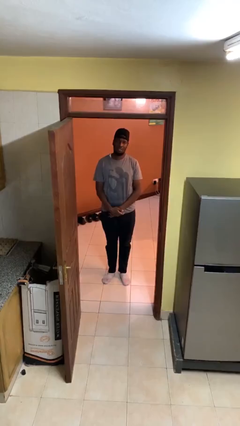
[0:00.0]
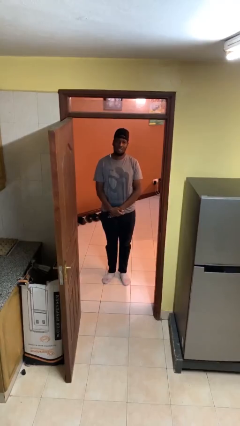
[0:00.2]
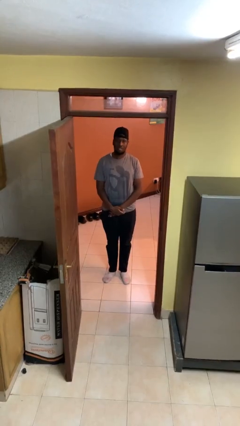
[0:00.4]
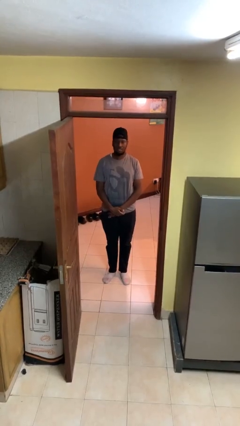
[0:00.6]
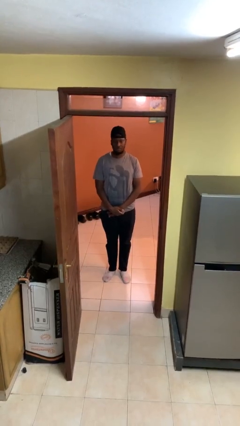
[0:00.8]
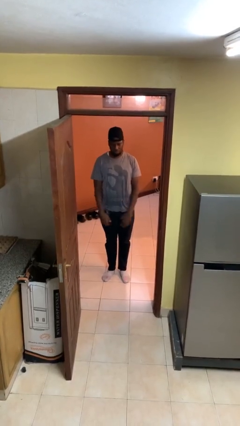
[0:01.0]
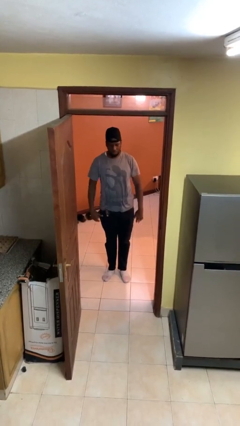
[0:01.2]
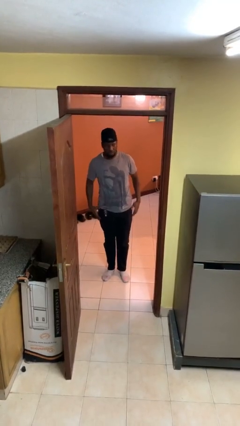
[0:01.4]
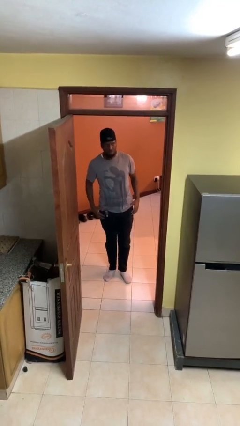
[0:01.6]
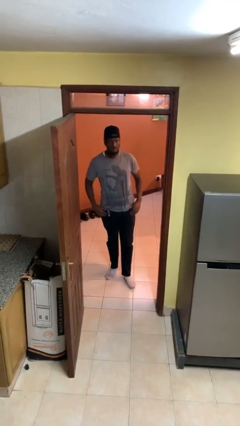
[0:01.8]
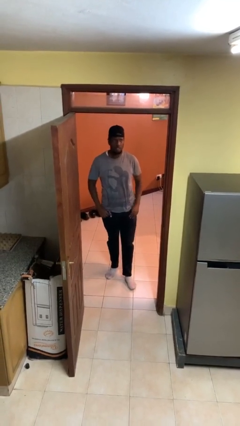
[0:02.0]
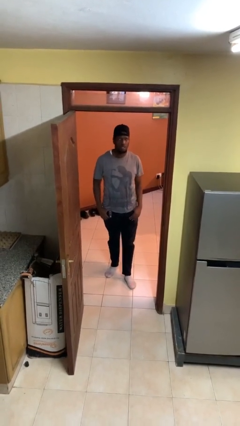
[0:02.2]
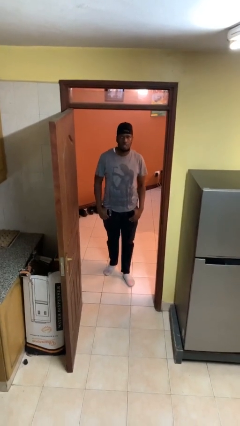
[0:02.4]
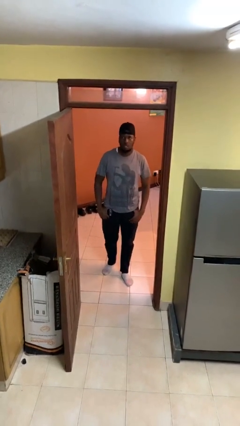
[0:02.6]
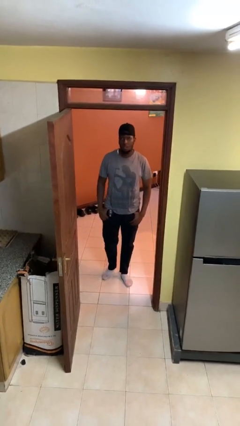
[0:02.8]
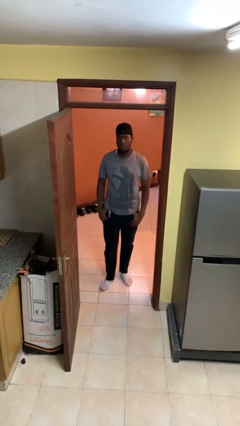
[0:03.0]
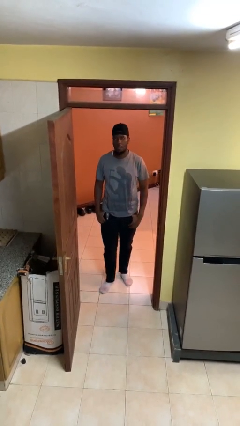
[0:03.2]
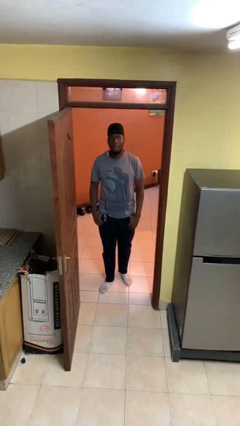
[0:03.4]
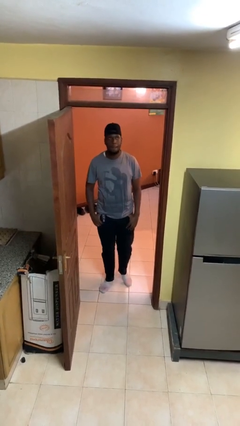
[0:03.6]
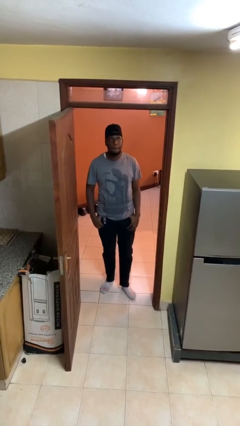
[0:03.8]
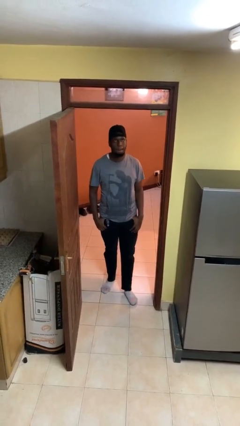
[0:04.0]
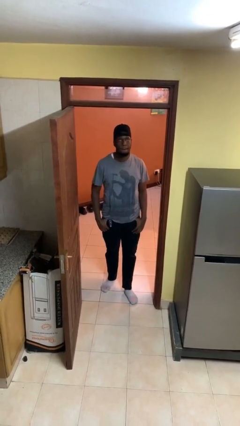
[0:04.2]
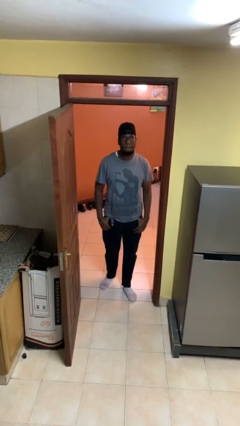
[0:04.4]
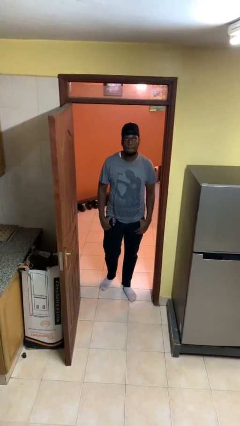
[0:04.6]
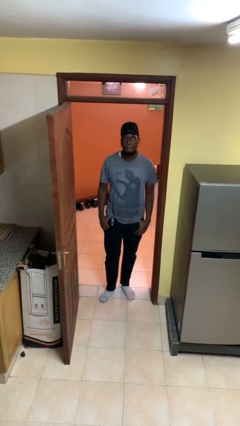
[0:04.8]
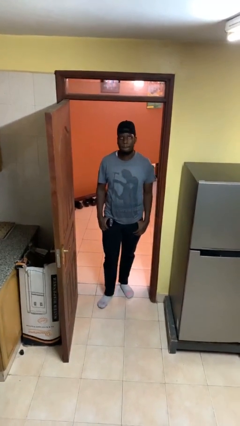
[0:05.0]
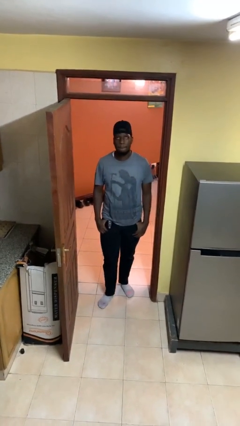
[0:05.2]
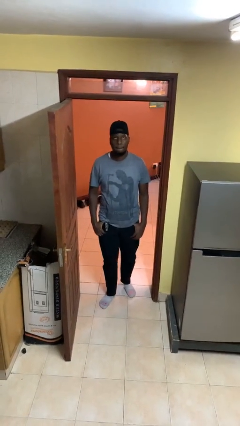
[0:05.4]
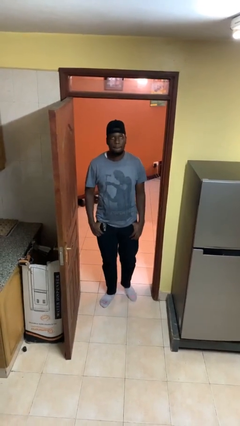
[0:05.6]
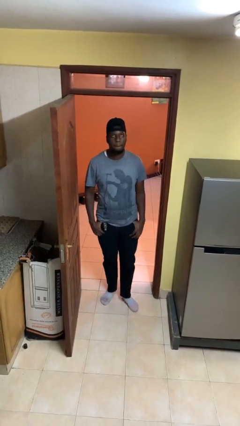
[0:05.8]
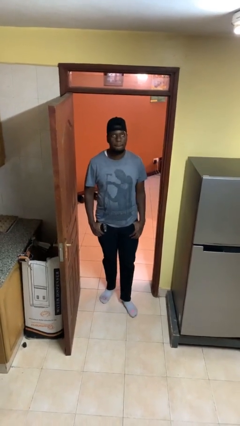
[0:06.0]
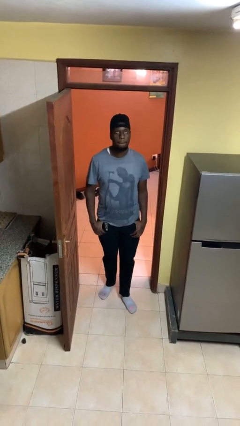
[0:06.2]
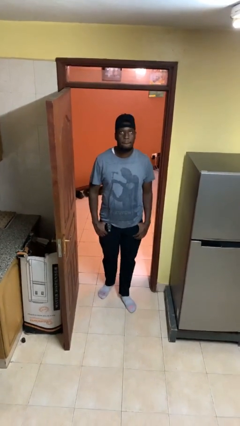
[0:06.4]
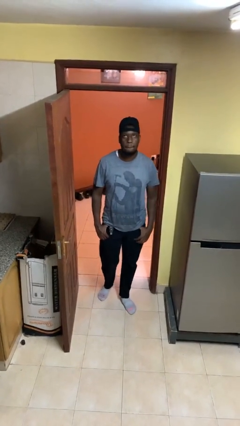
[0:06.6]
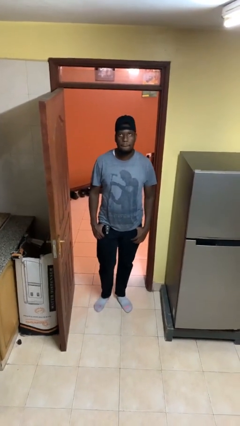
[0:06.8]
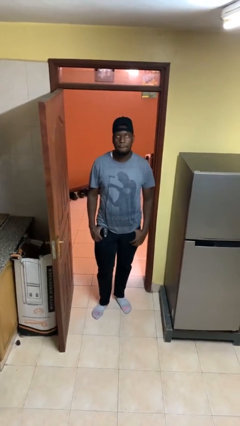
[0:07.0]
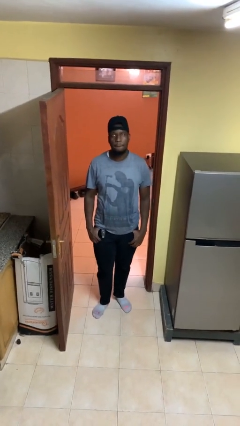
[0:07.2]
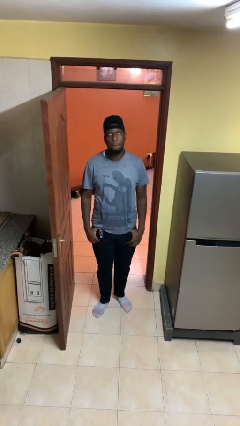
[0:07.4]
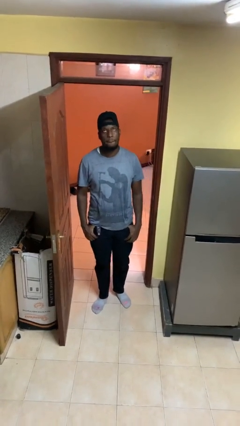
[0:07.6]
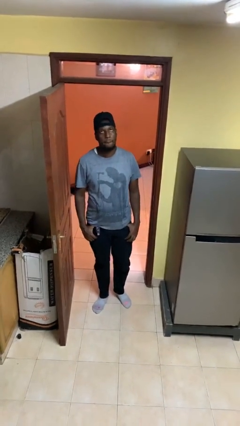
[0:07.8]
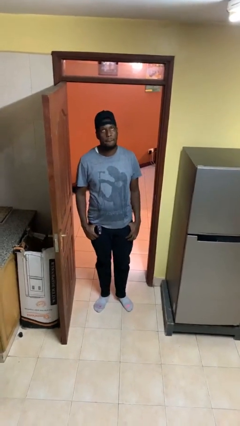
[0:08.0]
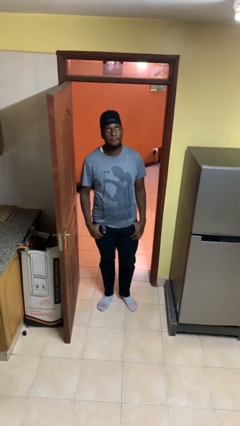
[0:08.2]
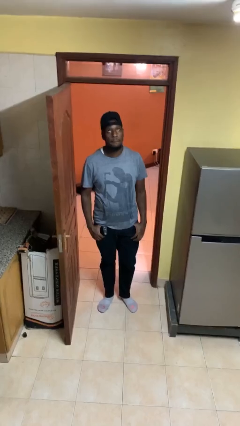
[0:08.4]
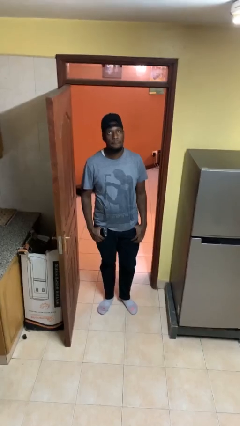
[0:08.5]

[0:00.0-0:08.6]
person enters scene through structure

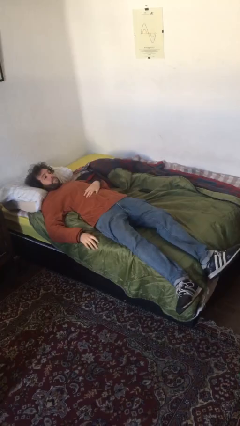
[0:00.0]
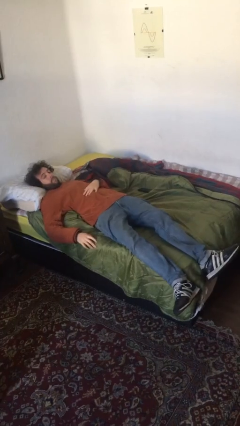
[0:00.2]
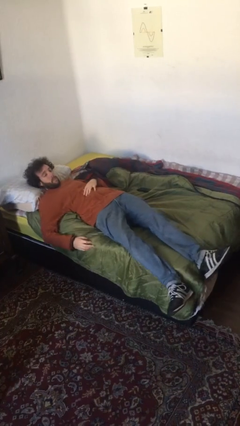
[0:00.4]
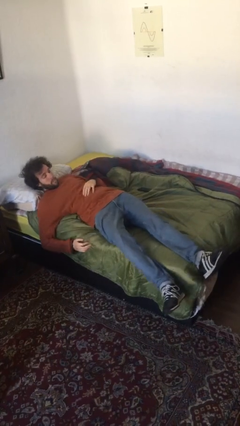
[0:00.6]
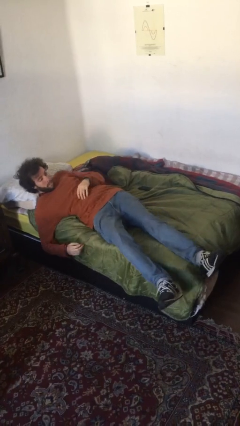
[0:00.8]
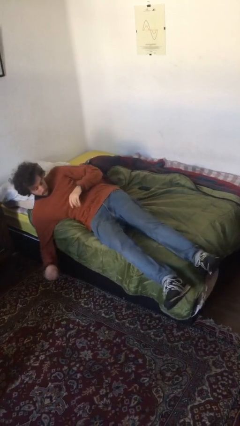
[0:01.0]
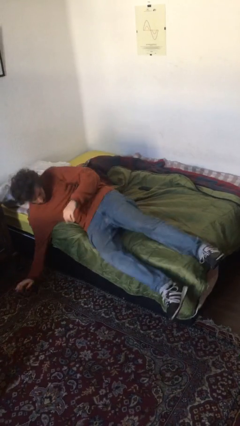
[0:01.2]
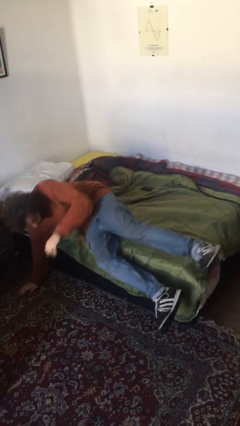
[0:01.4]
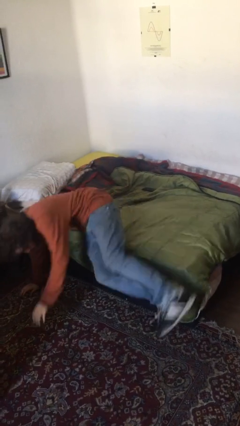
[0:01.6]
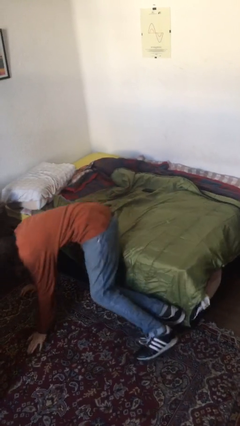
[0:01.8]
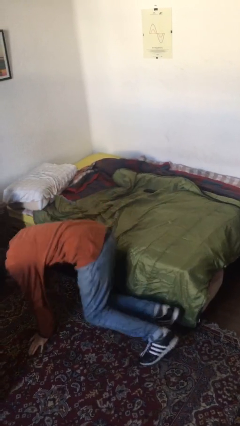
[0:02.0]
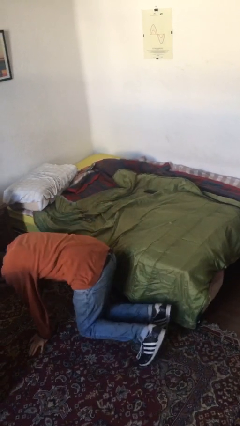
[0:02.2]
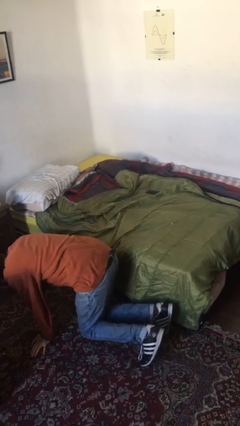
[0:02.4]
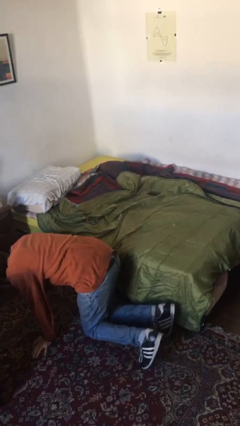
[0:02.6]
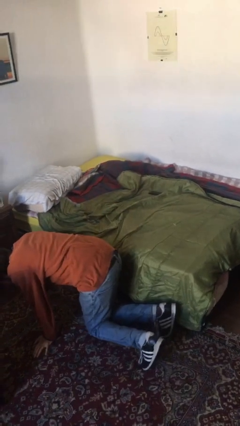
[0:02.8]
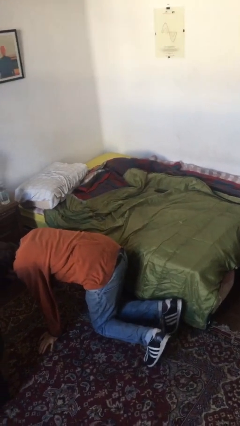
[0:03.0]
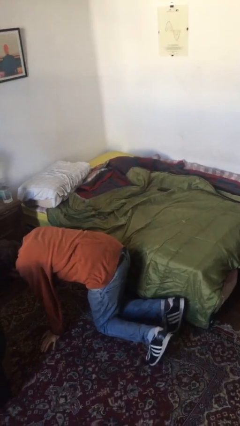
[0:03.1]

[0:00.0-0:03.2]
person falls from bed

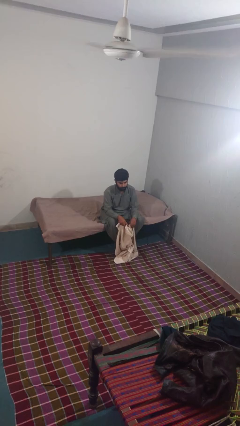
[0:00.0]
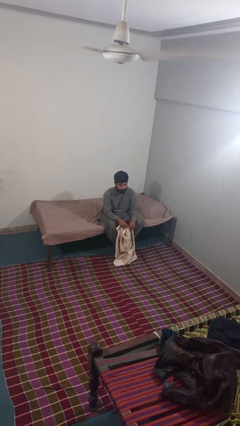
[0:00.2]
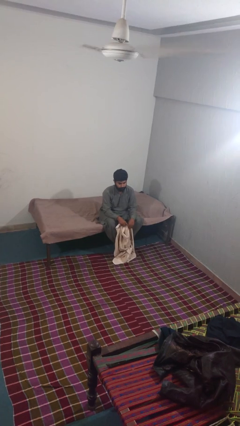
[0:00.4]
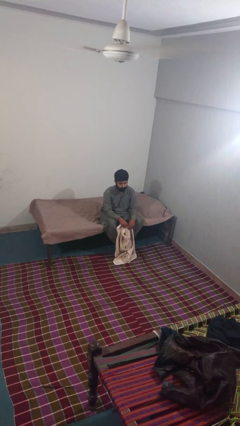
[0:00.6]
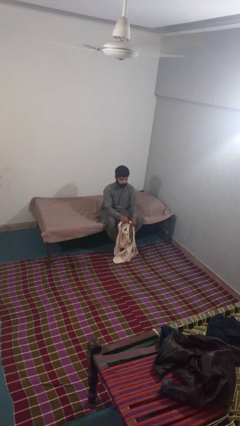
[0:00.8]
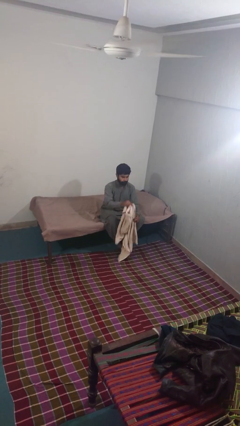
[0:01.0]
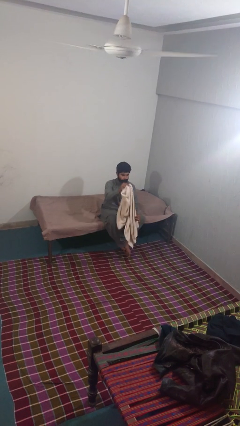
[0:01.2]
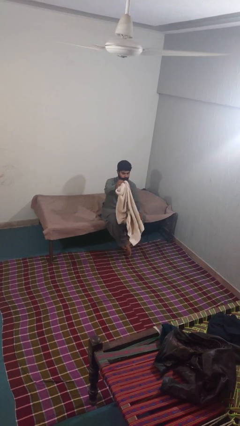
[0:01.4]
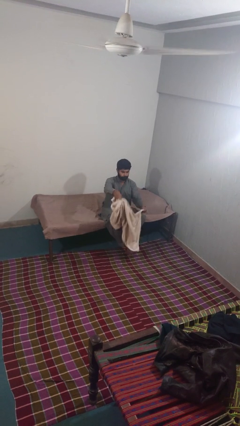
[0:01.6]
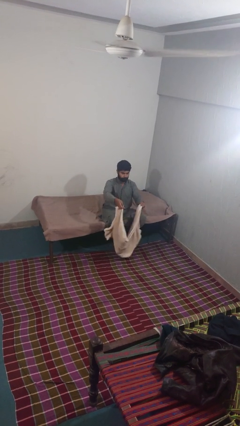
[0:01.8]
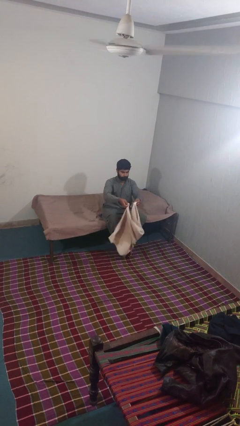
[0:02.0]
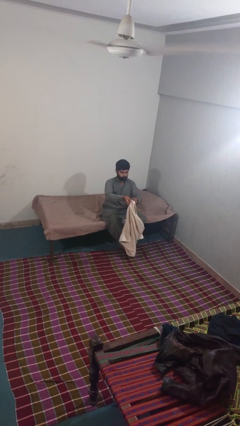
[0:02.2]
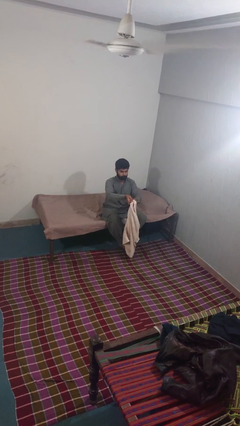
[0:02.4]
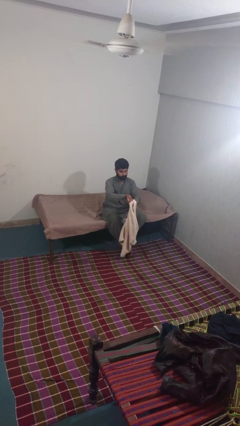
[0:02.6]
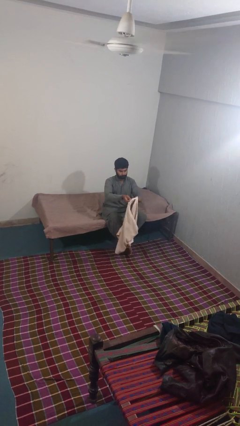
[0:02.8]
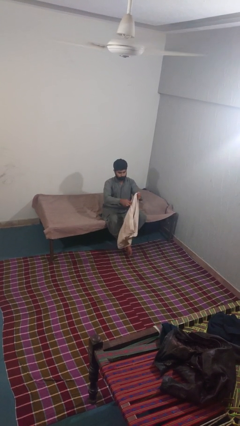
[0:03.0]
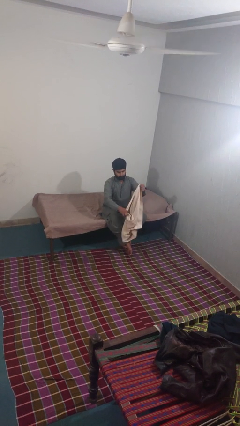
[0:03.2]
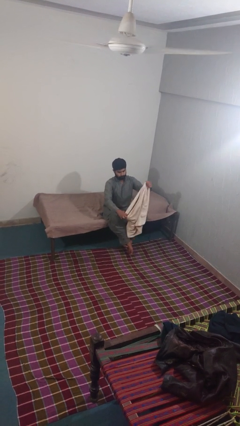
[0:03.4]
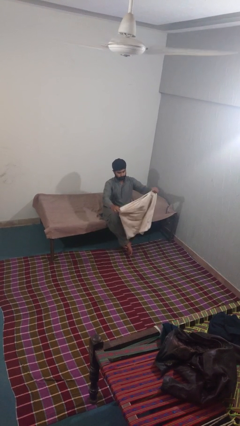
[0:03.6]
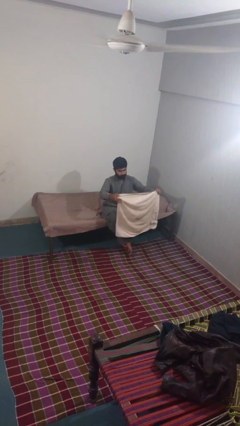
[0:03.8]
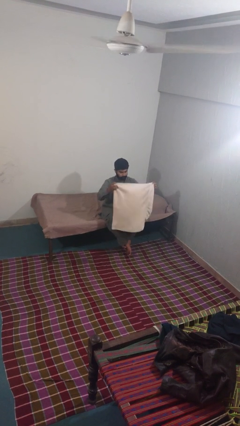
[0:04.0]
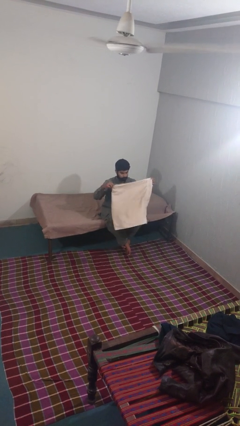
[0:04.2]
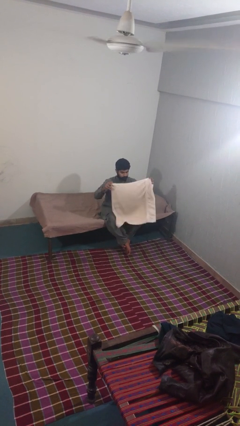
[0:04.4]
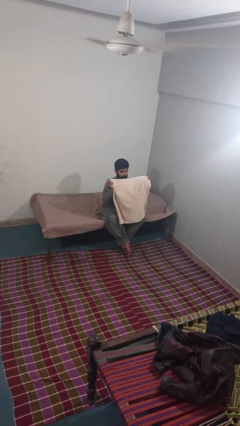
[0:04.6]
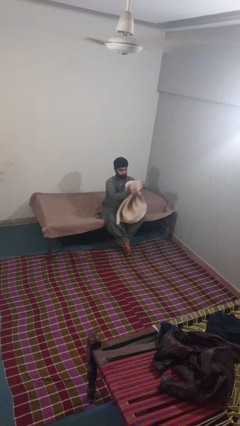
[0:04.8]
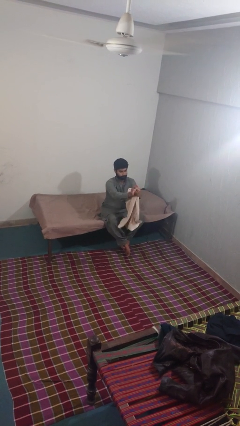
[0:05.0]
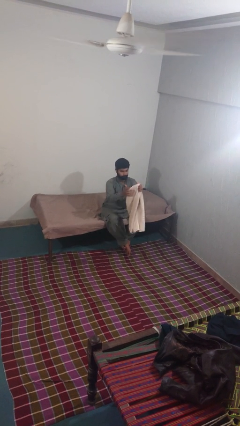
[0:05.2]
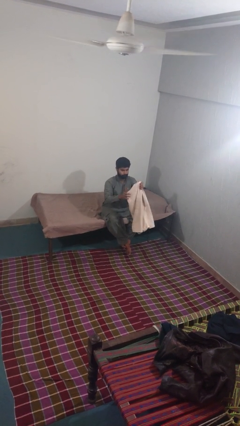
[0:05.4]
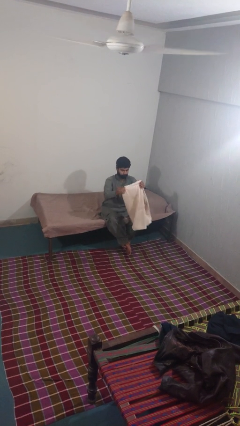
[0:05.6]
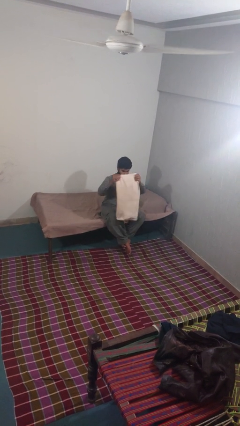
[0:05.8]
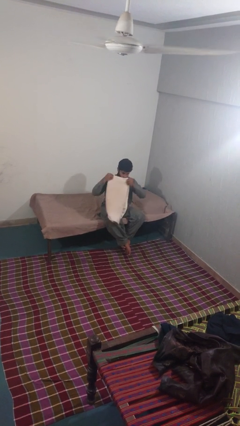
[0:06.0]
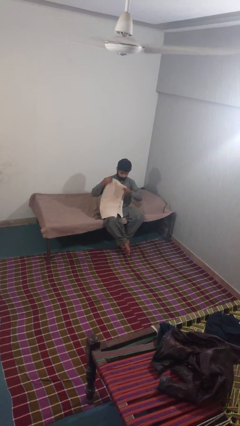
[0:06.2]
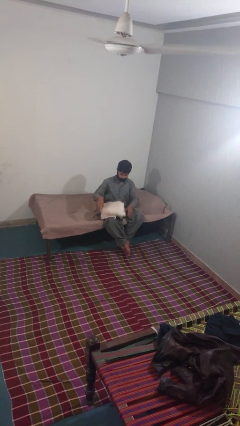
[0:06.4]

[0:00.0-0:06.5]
person folds towel

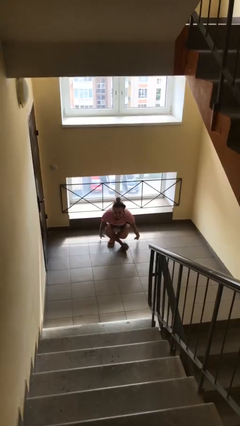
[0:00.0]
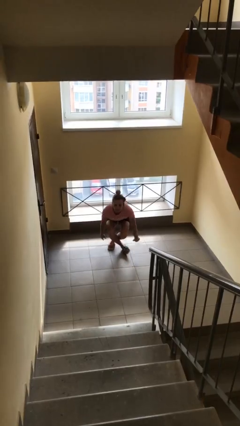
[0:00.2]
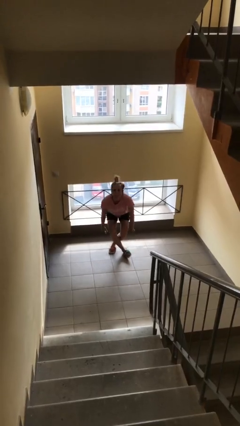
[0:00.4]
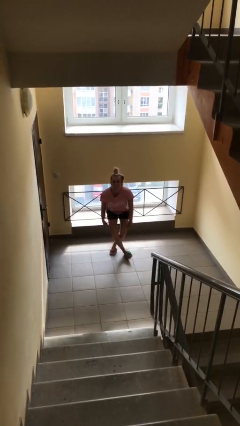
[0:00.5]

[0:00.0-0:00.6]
person stands up from floor
